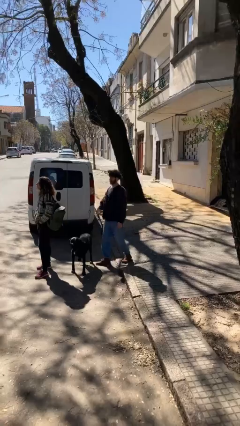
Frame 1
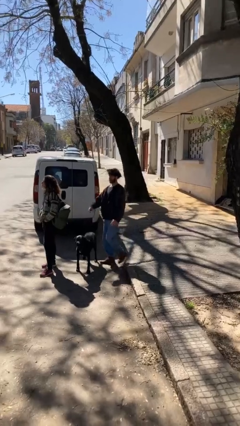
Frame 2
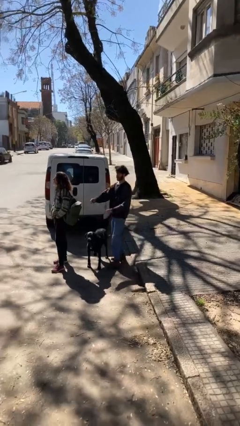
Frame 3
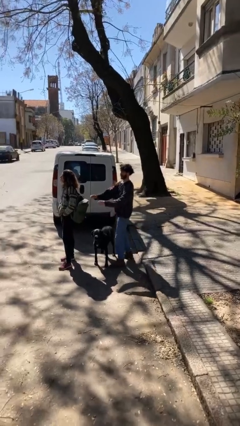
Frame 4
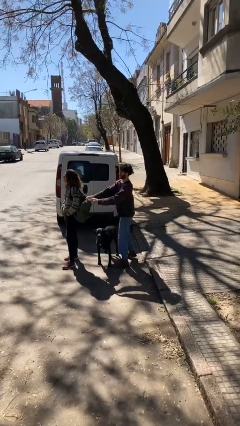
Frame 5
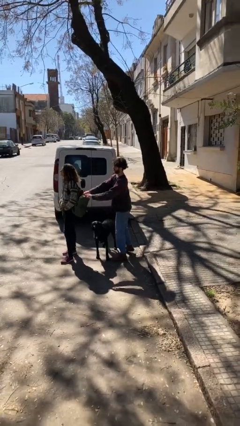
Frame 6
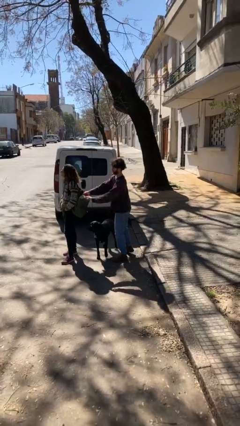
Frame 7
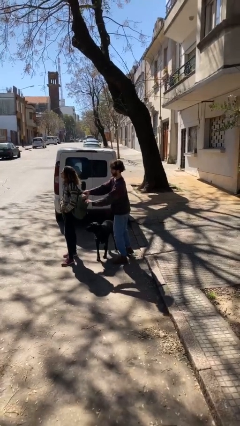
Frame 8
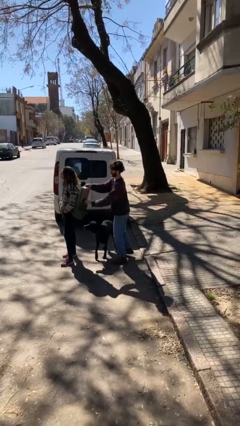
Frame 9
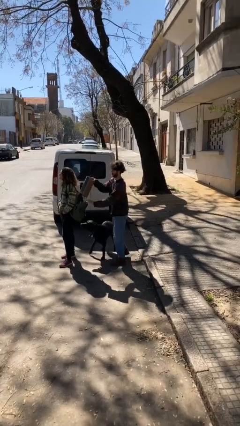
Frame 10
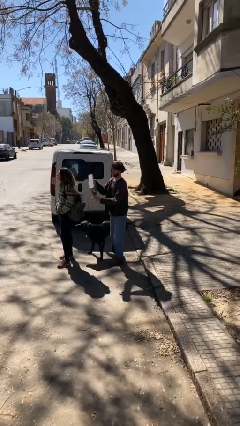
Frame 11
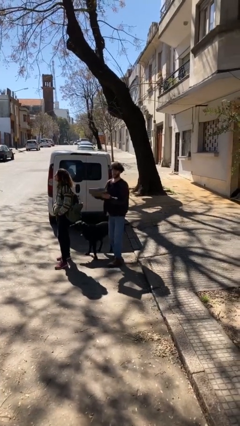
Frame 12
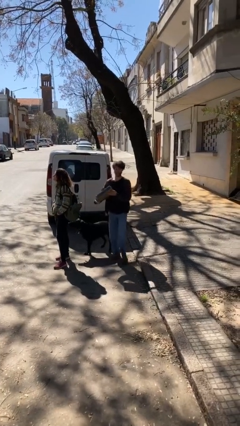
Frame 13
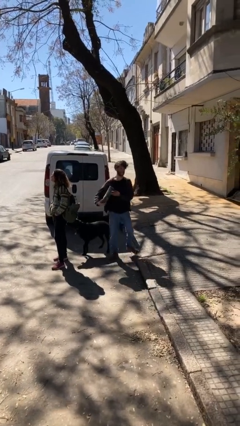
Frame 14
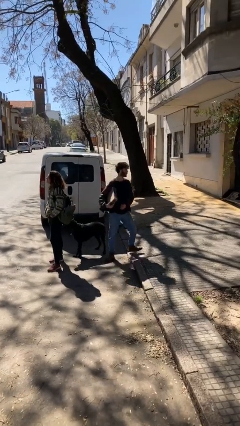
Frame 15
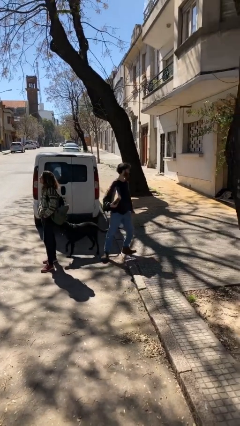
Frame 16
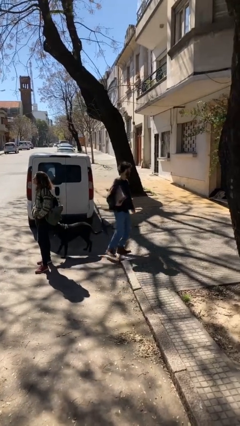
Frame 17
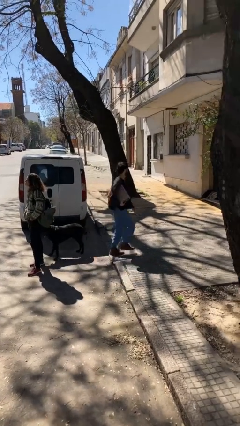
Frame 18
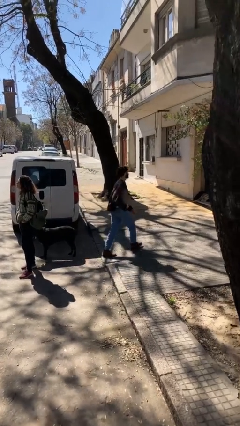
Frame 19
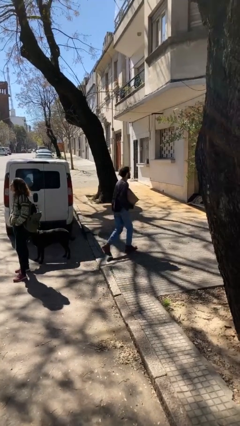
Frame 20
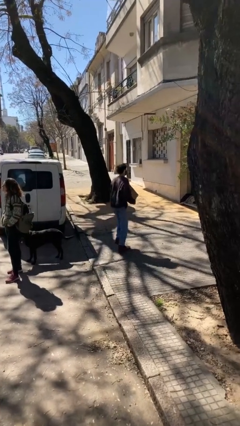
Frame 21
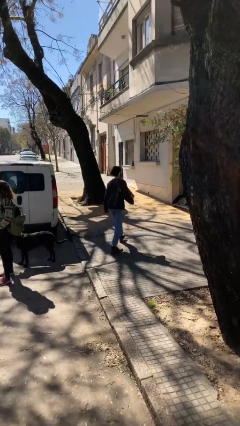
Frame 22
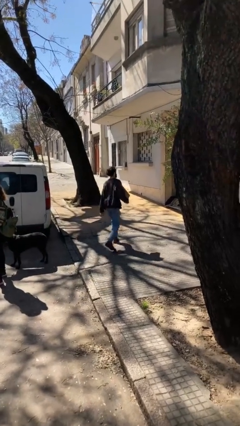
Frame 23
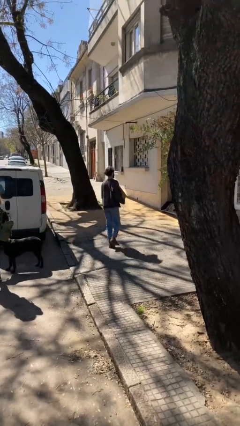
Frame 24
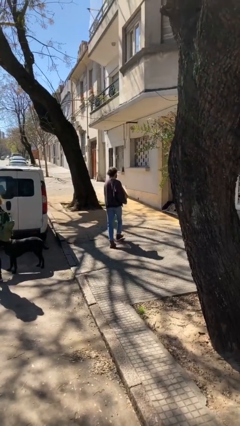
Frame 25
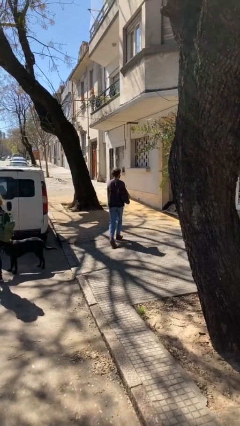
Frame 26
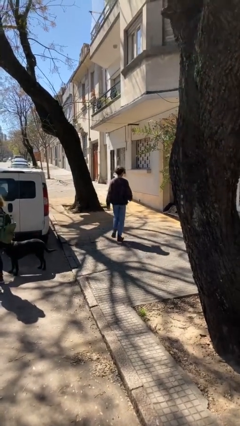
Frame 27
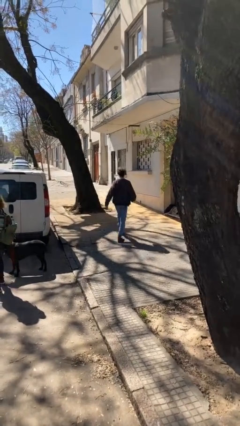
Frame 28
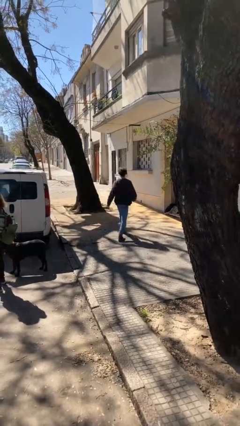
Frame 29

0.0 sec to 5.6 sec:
person steals object from person

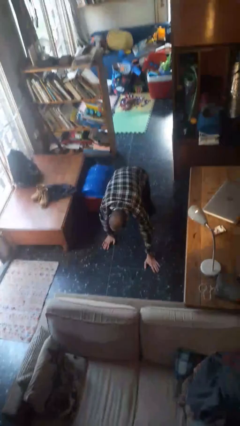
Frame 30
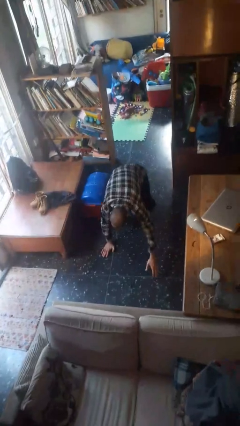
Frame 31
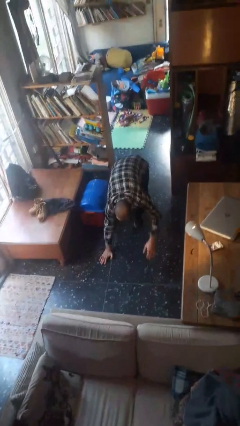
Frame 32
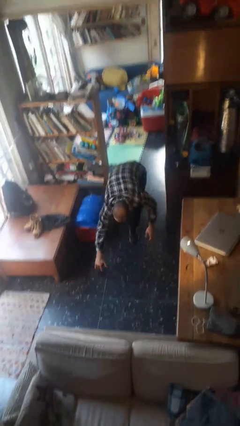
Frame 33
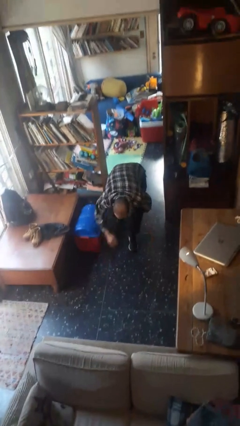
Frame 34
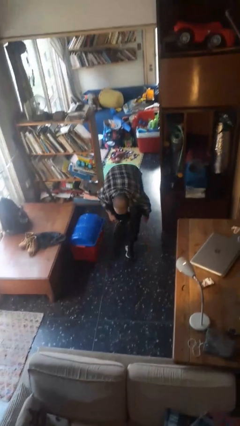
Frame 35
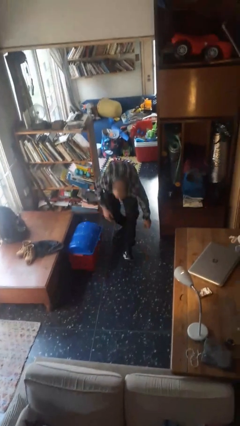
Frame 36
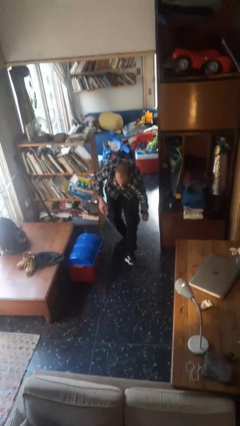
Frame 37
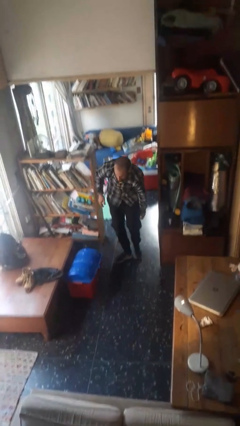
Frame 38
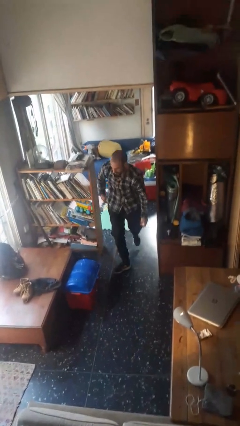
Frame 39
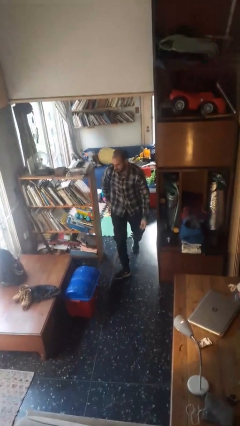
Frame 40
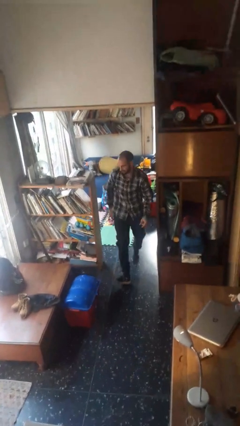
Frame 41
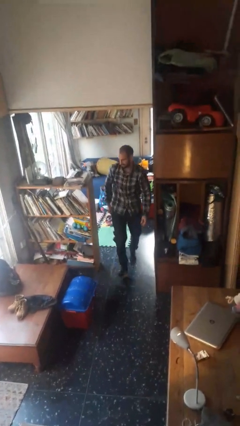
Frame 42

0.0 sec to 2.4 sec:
person stands up from floor

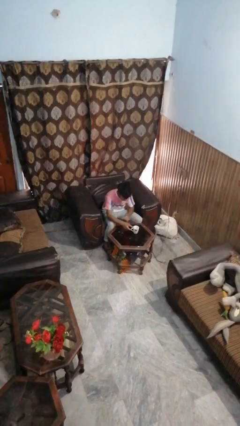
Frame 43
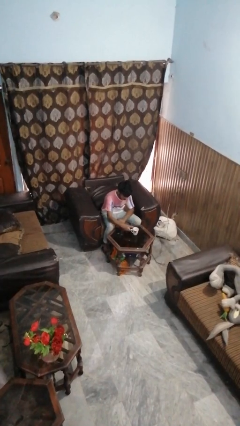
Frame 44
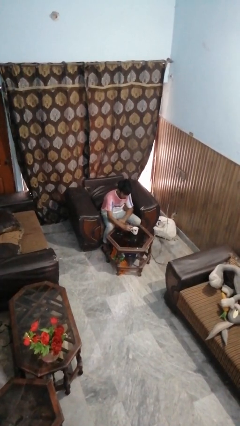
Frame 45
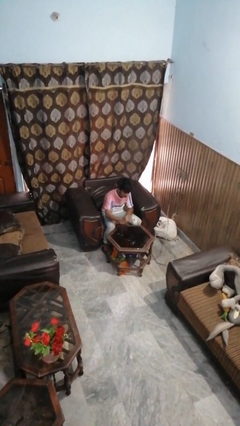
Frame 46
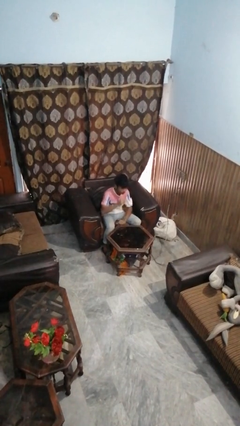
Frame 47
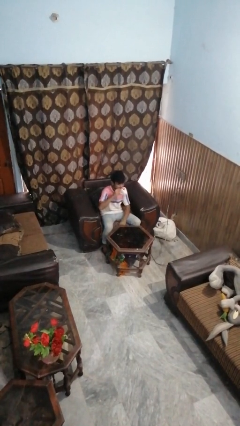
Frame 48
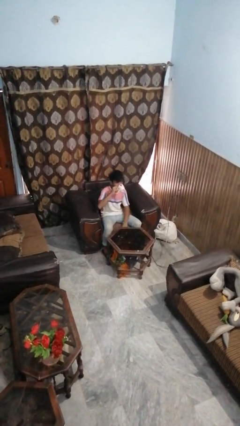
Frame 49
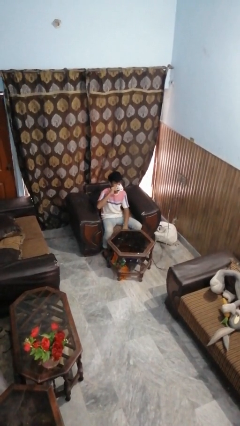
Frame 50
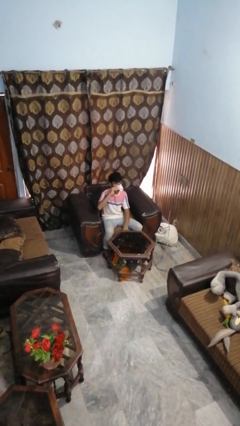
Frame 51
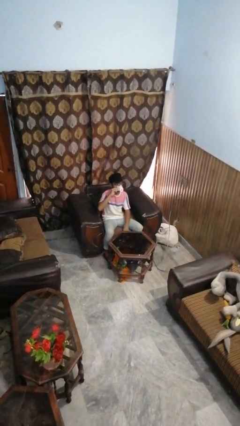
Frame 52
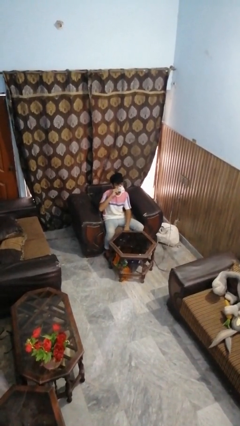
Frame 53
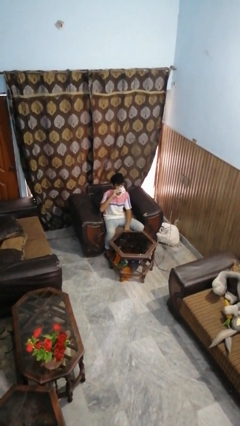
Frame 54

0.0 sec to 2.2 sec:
person drinks from mug

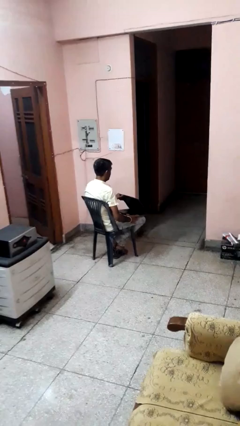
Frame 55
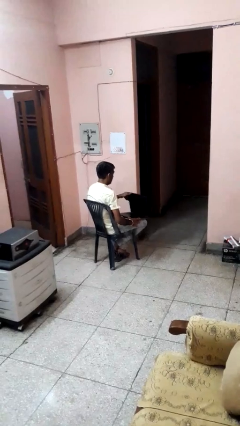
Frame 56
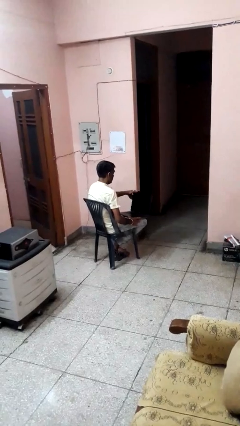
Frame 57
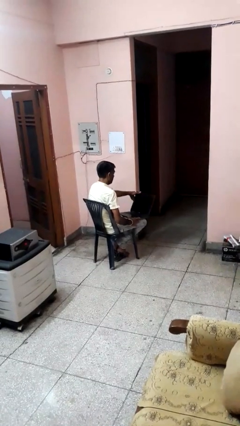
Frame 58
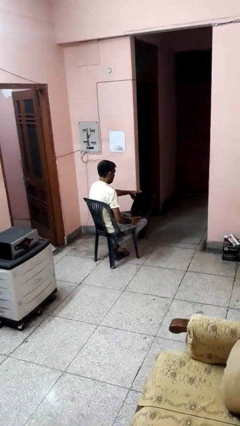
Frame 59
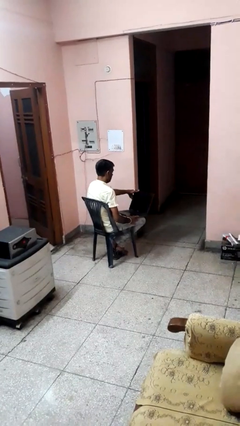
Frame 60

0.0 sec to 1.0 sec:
person opens laptop

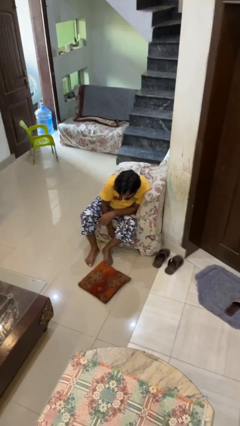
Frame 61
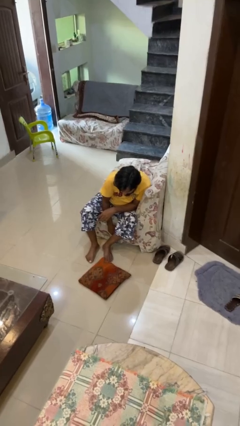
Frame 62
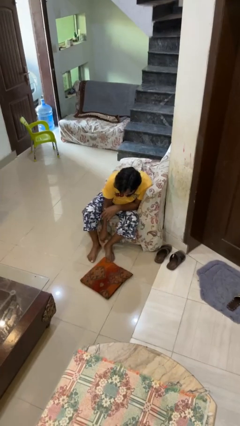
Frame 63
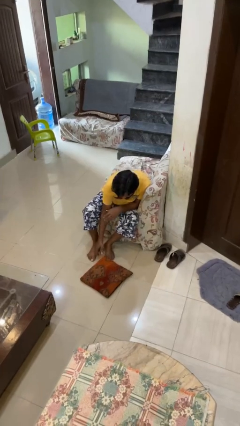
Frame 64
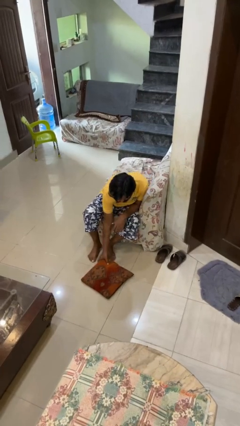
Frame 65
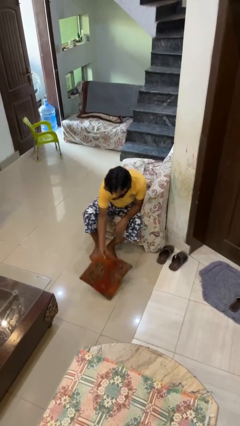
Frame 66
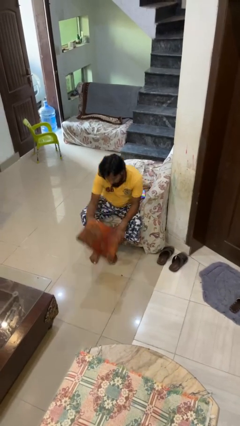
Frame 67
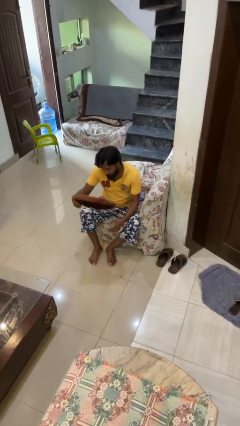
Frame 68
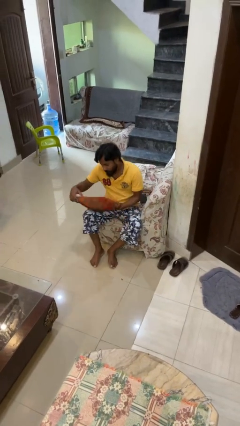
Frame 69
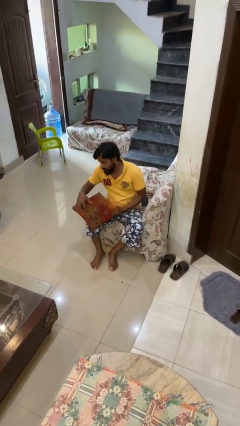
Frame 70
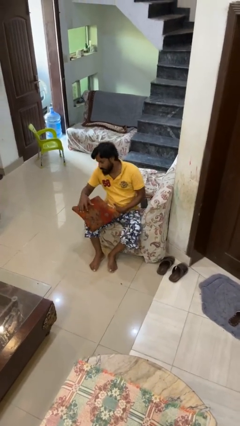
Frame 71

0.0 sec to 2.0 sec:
person picks up object from floor

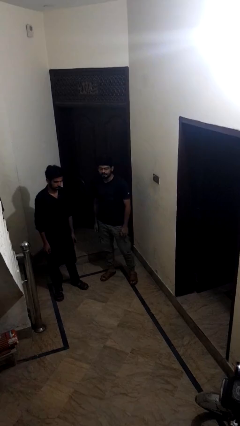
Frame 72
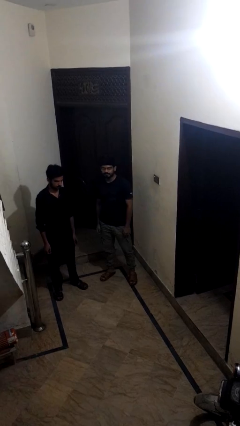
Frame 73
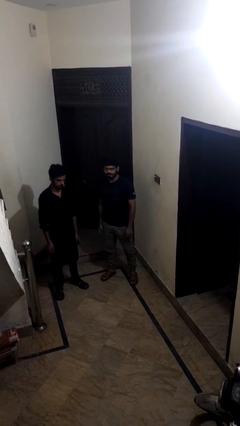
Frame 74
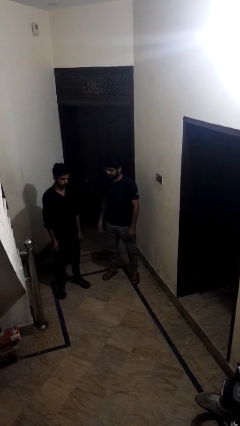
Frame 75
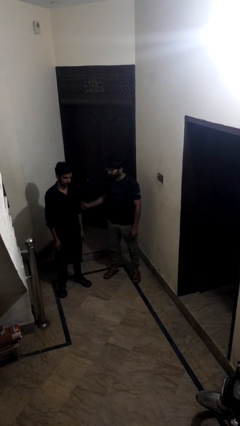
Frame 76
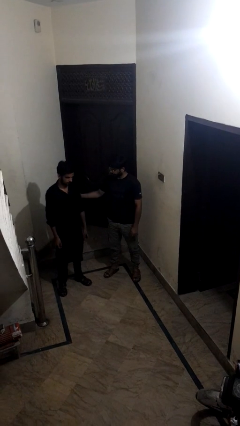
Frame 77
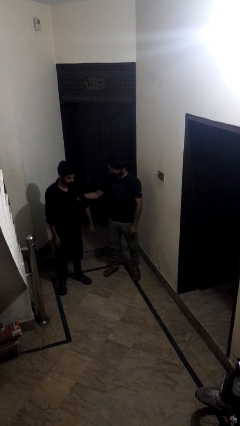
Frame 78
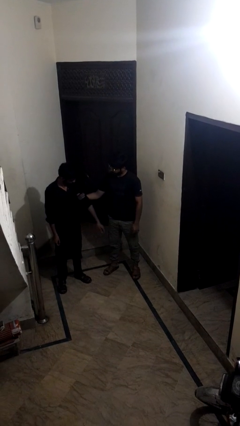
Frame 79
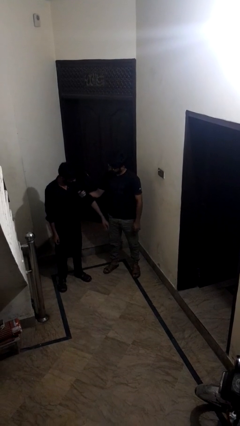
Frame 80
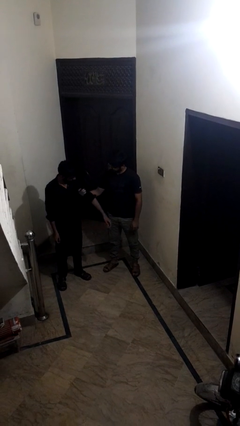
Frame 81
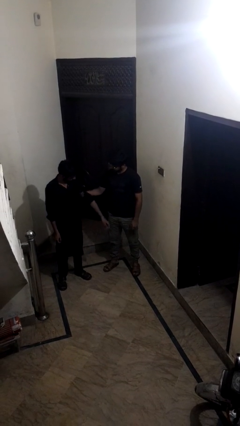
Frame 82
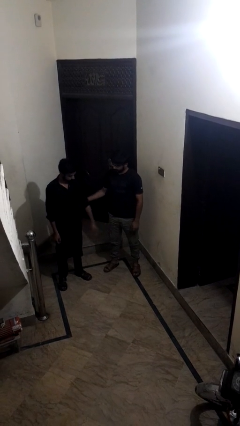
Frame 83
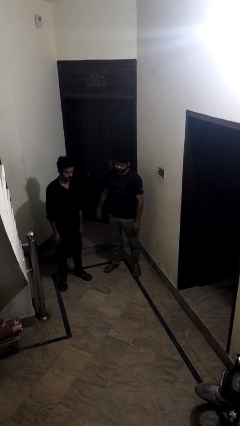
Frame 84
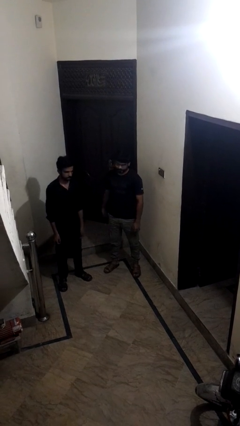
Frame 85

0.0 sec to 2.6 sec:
person grabs person by bicep

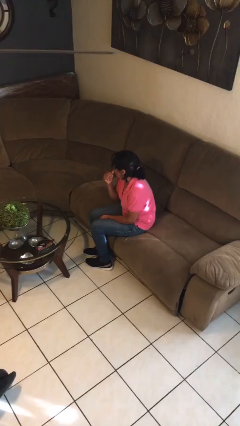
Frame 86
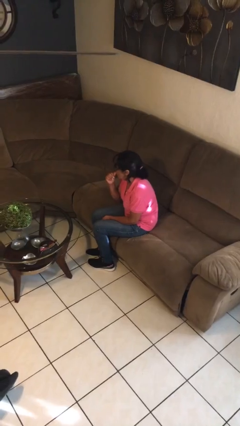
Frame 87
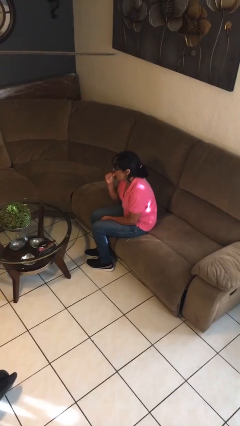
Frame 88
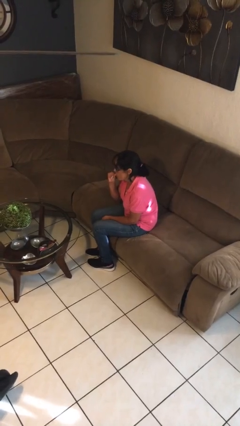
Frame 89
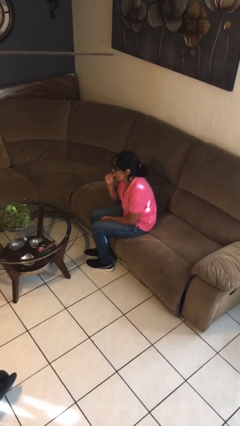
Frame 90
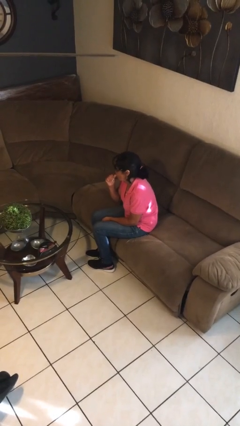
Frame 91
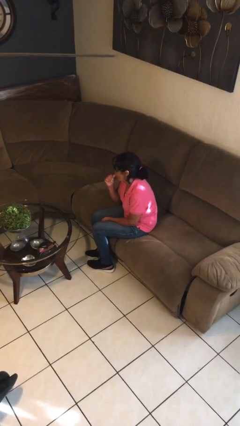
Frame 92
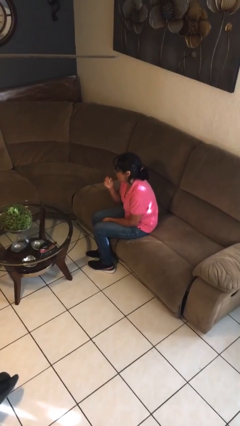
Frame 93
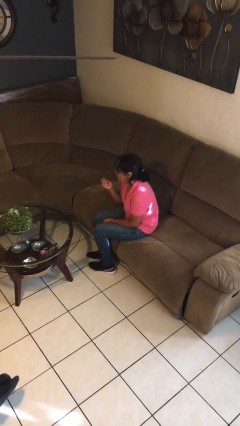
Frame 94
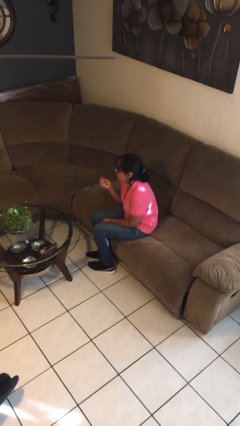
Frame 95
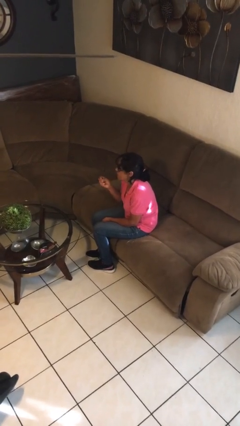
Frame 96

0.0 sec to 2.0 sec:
person licks fingers
